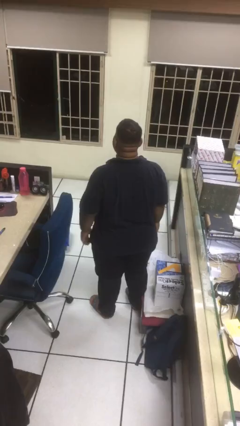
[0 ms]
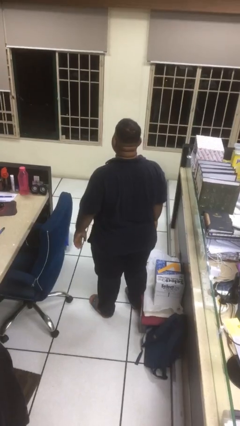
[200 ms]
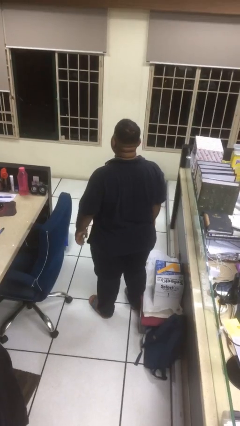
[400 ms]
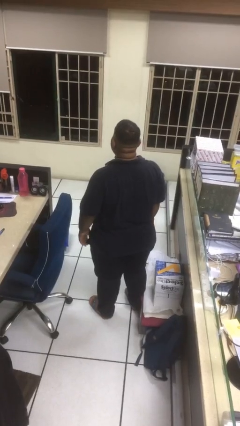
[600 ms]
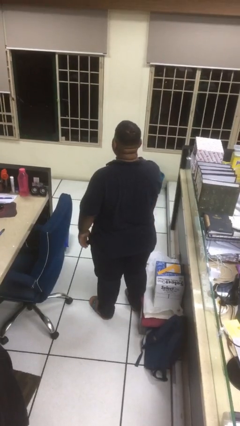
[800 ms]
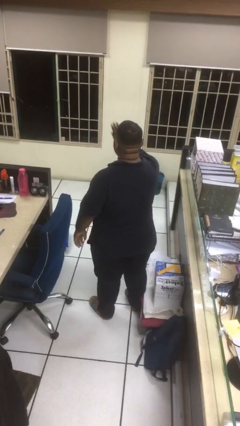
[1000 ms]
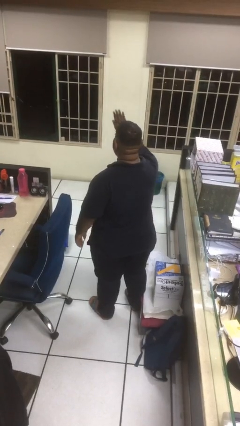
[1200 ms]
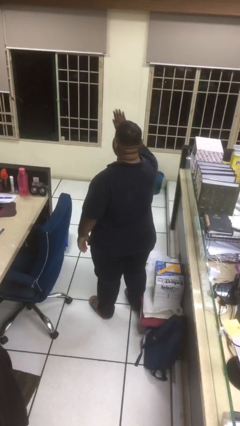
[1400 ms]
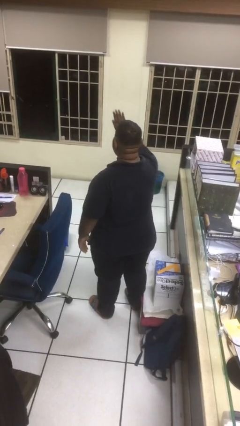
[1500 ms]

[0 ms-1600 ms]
person gestures stop

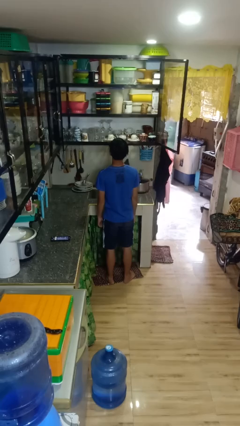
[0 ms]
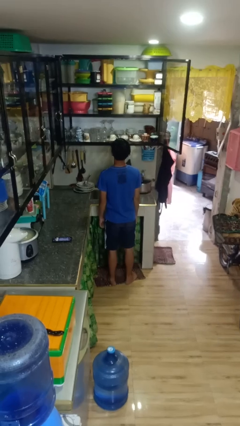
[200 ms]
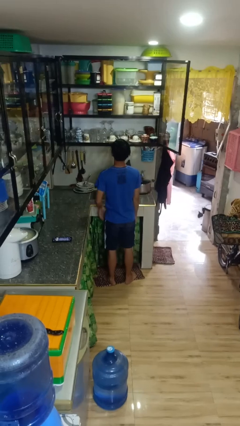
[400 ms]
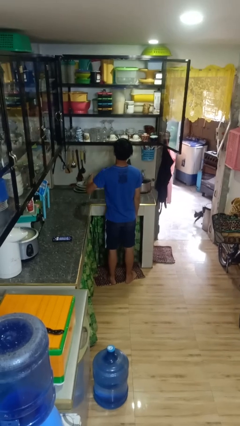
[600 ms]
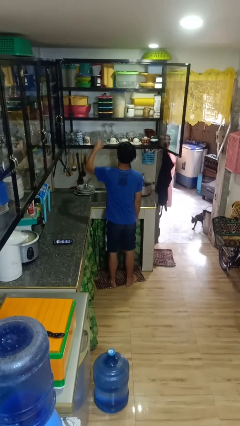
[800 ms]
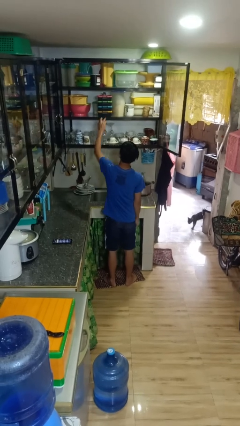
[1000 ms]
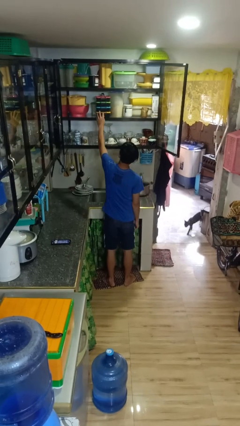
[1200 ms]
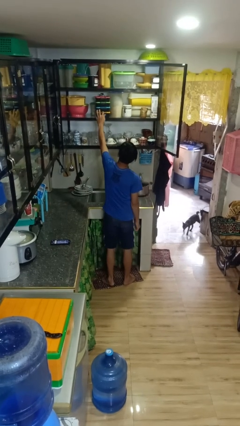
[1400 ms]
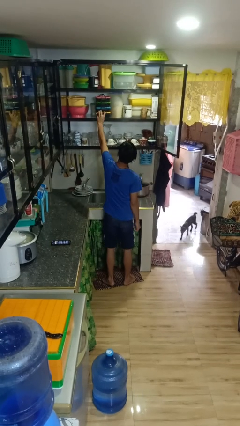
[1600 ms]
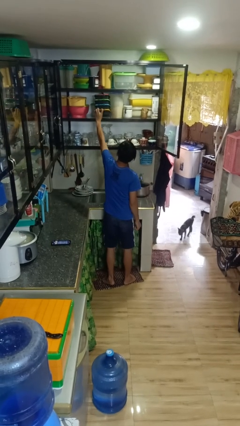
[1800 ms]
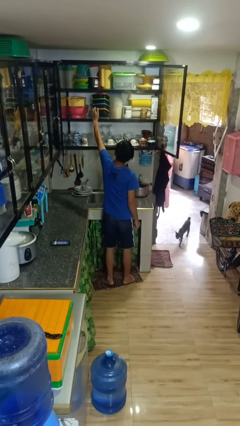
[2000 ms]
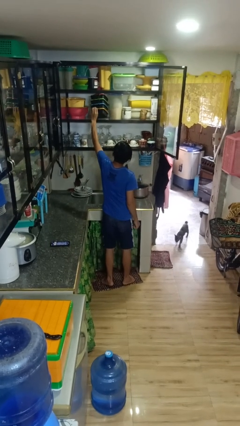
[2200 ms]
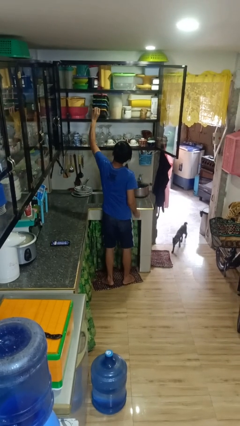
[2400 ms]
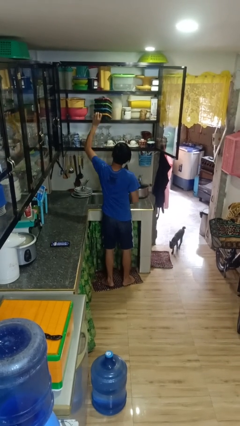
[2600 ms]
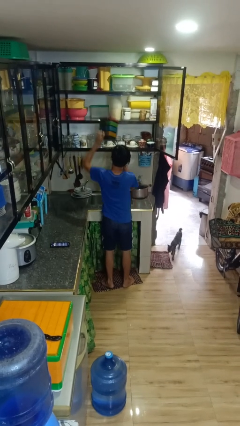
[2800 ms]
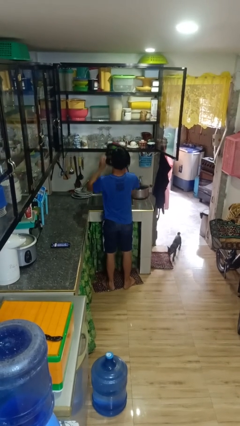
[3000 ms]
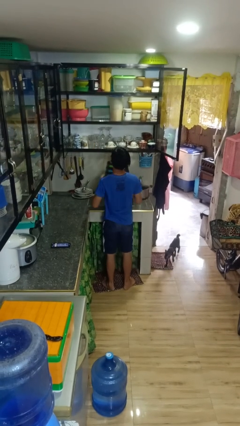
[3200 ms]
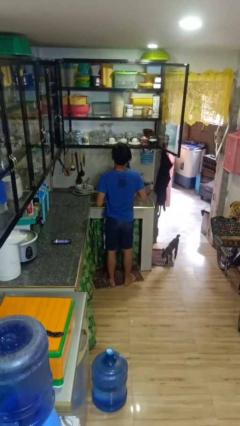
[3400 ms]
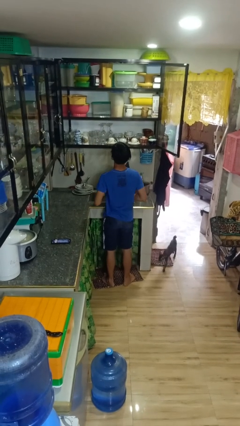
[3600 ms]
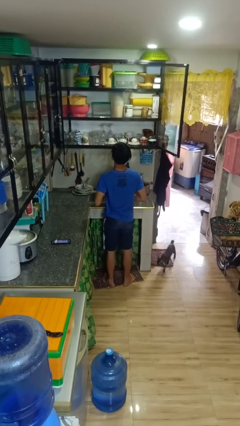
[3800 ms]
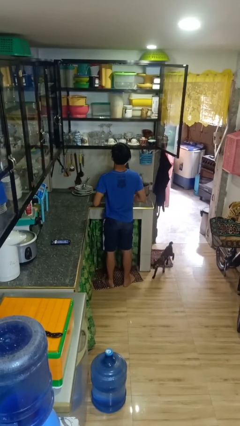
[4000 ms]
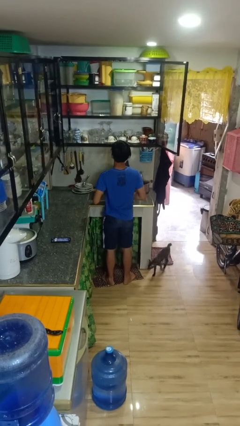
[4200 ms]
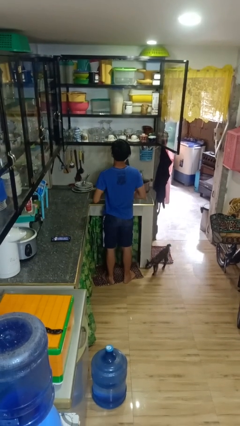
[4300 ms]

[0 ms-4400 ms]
person picks up object from cabinet

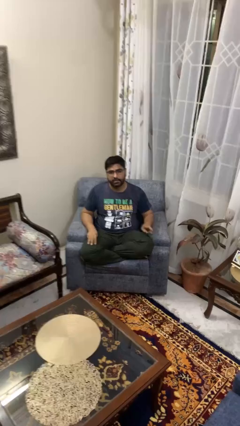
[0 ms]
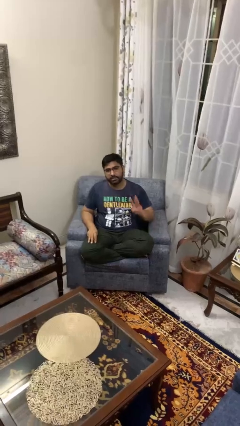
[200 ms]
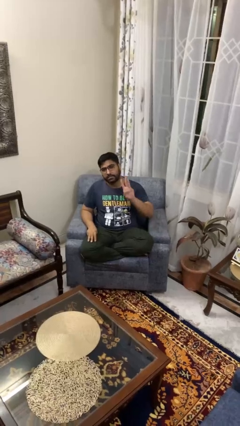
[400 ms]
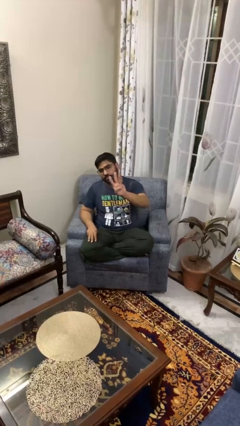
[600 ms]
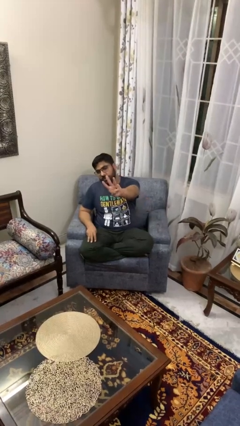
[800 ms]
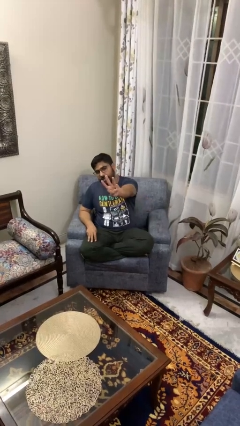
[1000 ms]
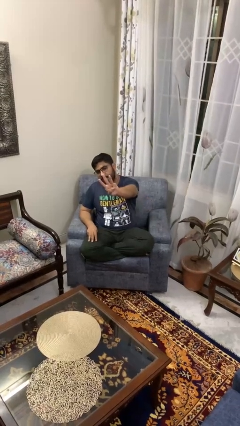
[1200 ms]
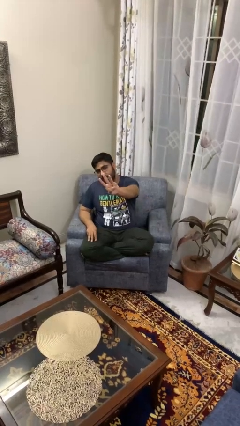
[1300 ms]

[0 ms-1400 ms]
person gestures number three

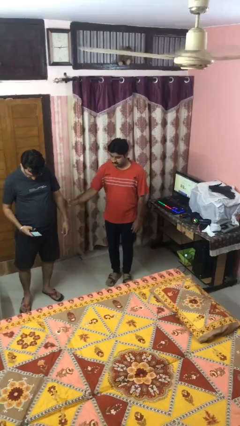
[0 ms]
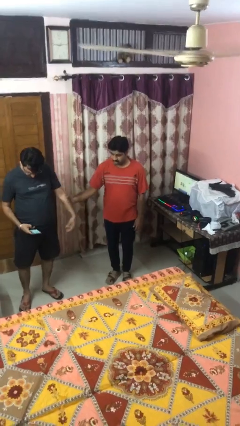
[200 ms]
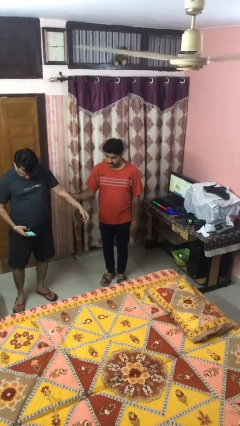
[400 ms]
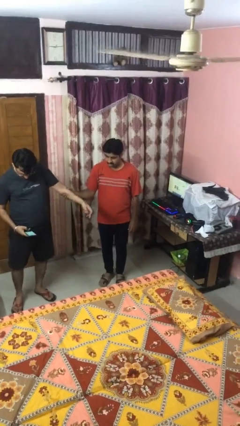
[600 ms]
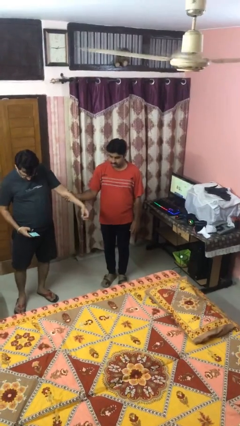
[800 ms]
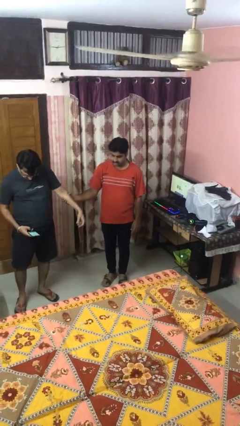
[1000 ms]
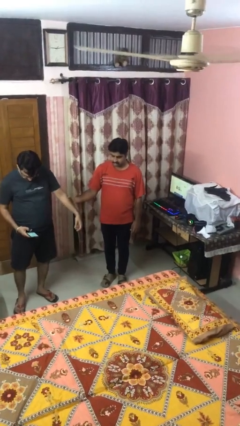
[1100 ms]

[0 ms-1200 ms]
person grabs person by forearm

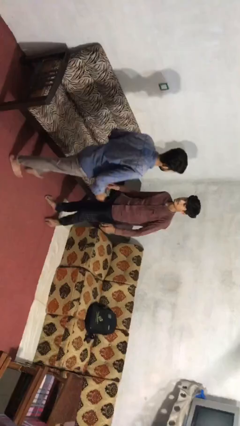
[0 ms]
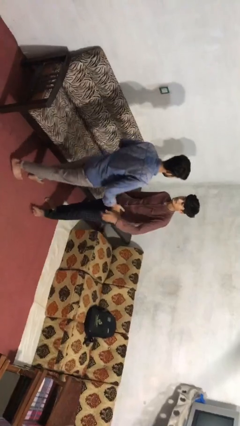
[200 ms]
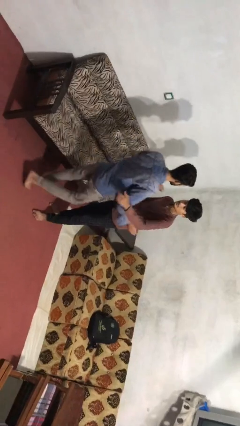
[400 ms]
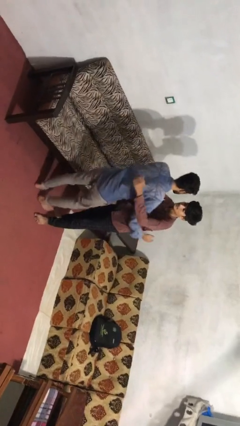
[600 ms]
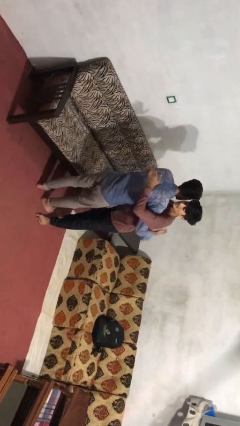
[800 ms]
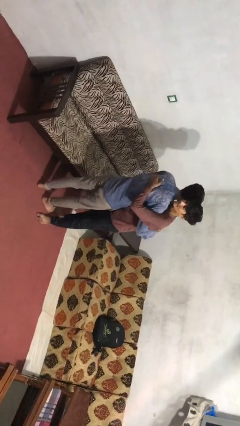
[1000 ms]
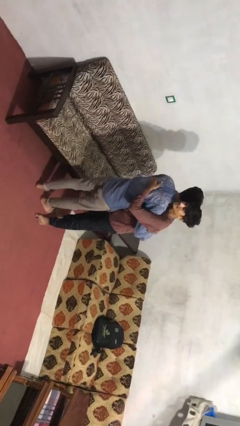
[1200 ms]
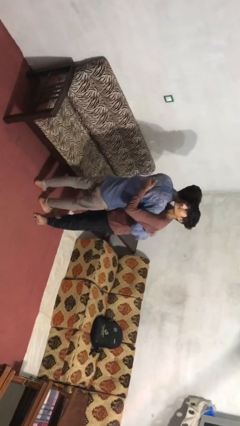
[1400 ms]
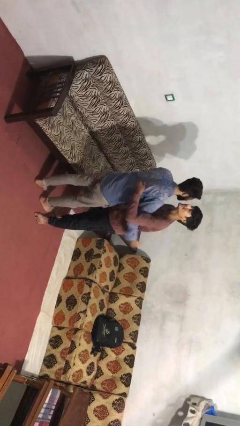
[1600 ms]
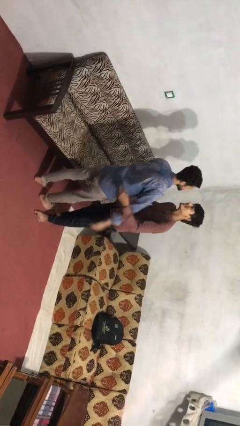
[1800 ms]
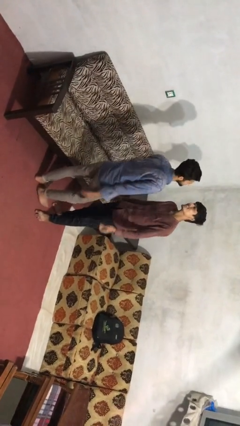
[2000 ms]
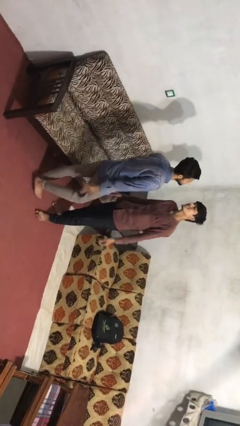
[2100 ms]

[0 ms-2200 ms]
person embraces person

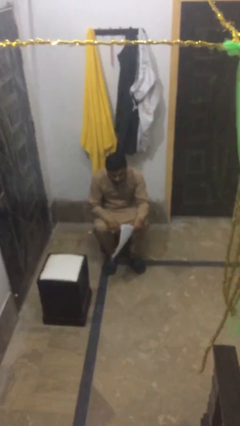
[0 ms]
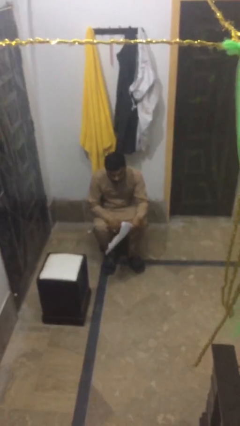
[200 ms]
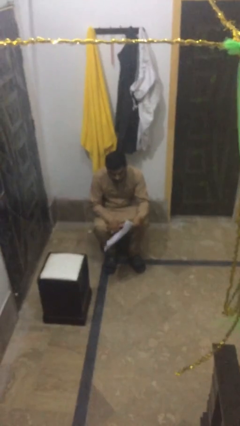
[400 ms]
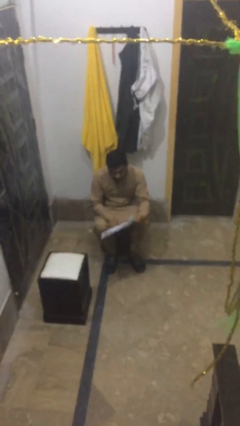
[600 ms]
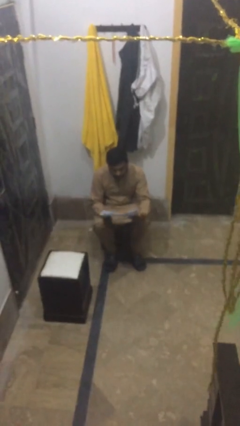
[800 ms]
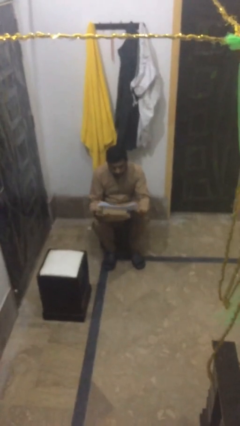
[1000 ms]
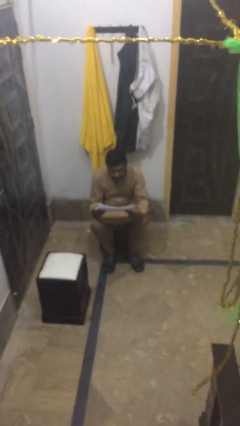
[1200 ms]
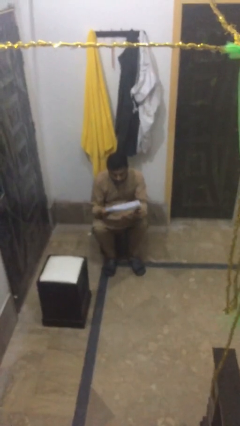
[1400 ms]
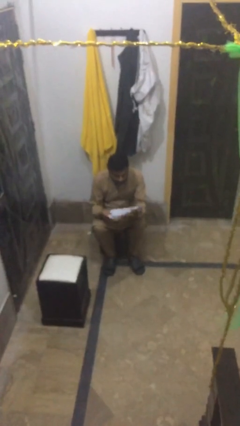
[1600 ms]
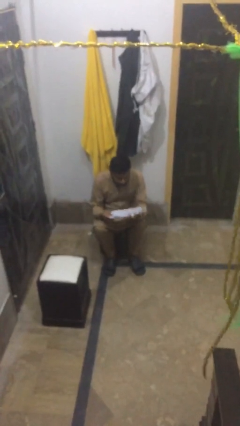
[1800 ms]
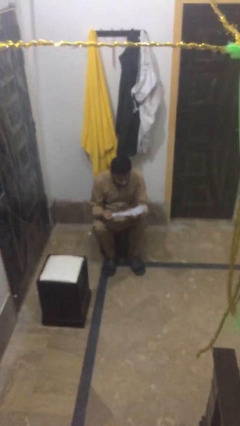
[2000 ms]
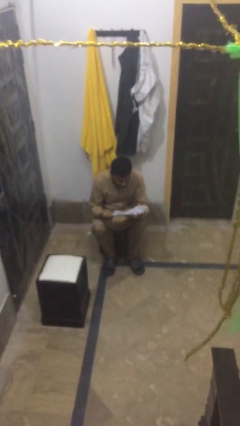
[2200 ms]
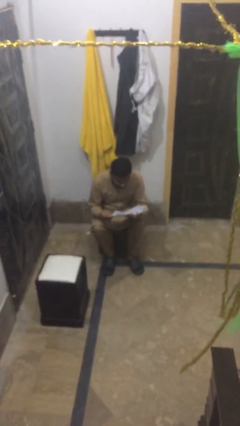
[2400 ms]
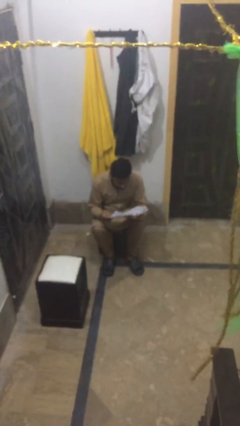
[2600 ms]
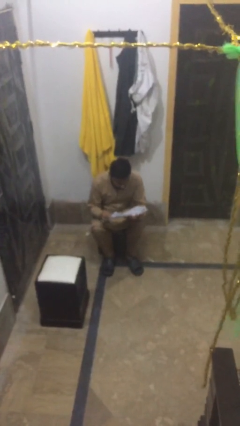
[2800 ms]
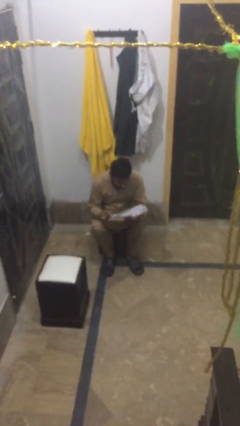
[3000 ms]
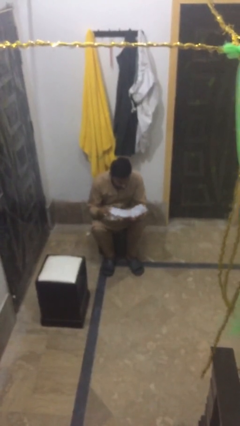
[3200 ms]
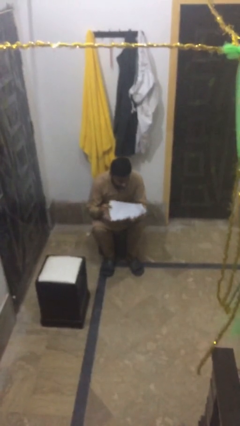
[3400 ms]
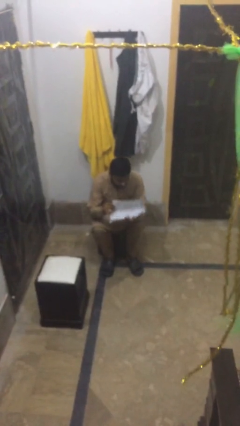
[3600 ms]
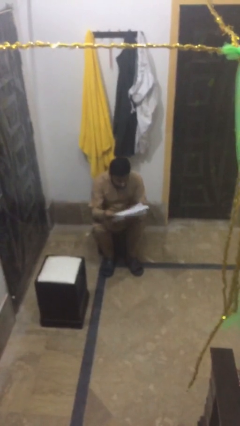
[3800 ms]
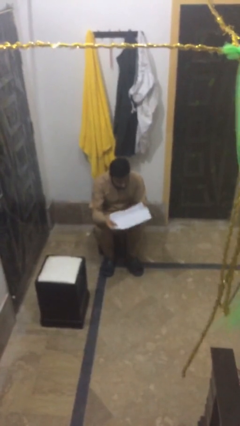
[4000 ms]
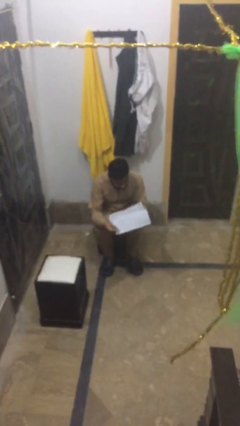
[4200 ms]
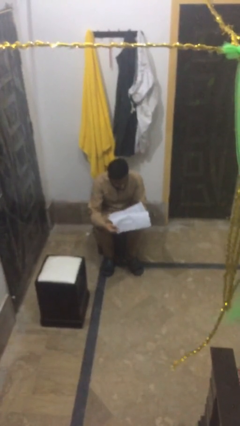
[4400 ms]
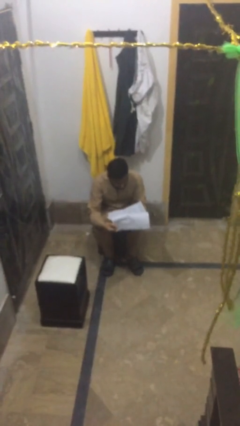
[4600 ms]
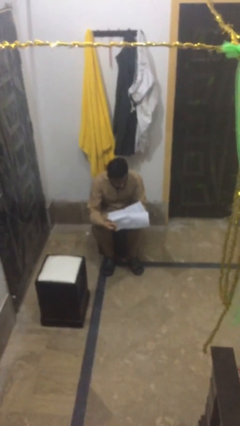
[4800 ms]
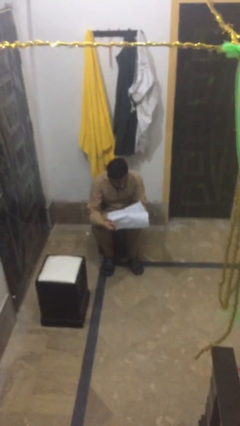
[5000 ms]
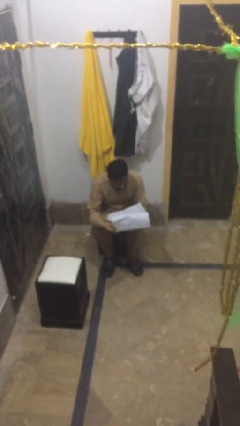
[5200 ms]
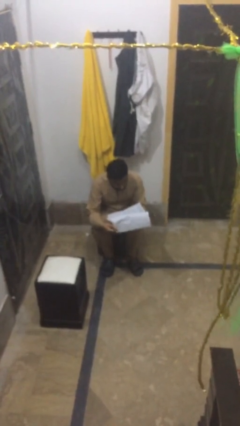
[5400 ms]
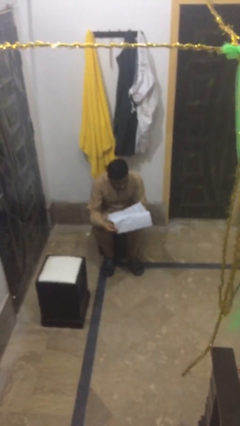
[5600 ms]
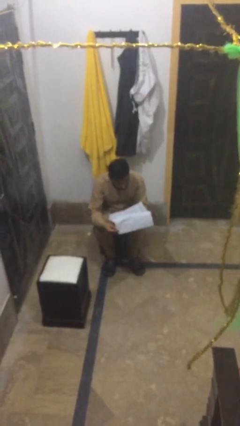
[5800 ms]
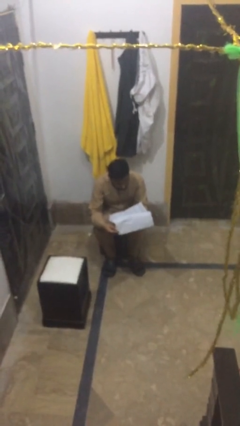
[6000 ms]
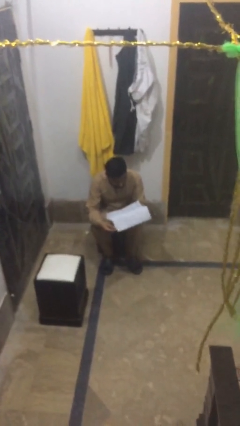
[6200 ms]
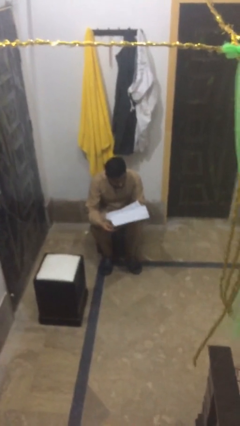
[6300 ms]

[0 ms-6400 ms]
person reads document

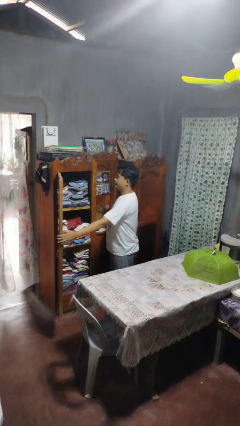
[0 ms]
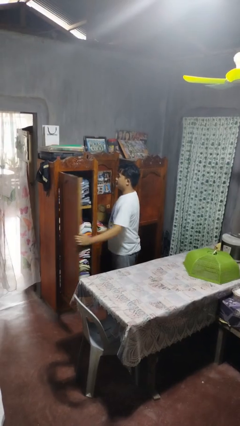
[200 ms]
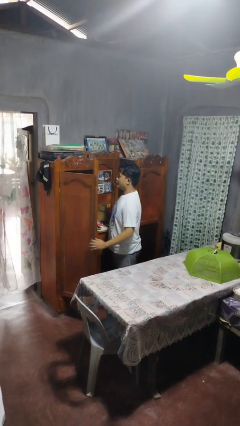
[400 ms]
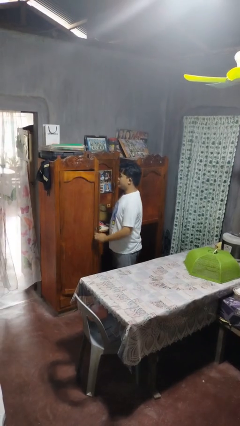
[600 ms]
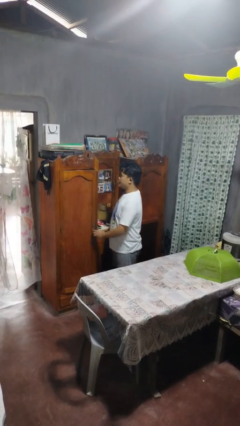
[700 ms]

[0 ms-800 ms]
person closes closet door
